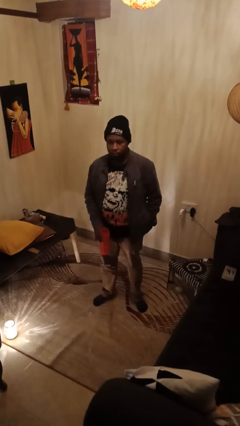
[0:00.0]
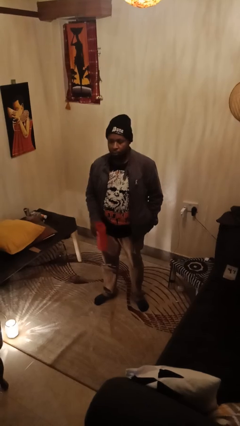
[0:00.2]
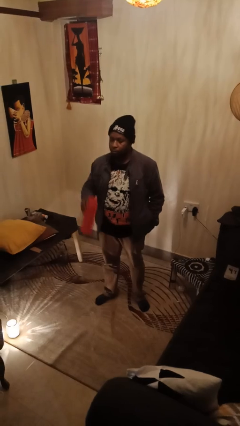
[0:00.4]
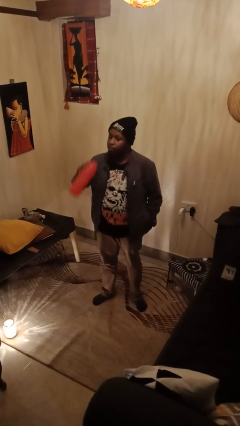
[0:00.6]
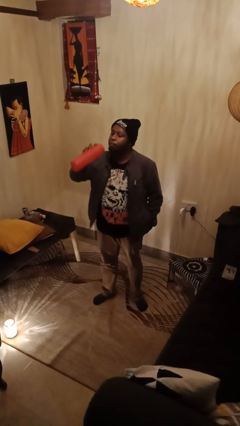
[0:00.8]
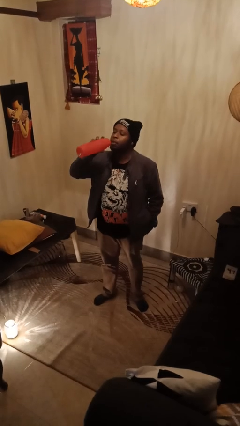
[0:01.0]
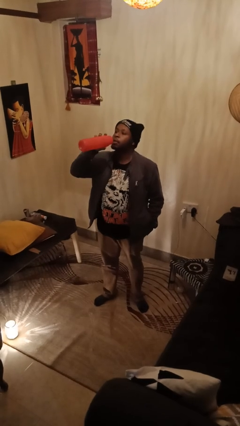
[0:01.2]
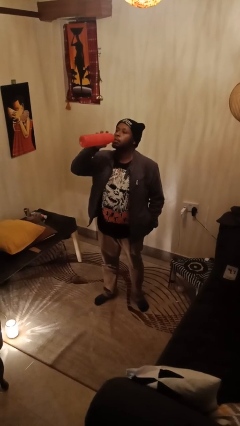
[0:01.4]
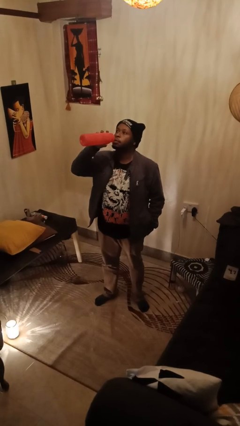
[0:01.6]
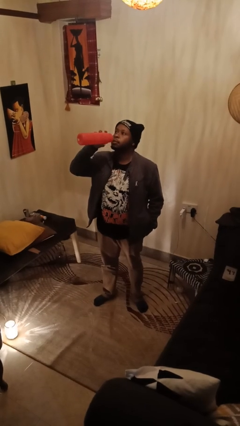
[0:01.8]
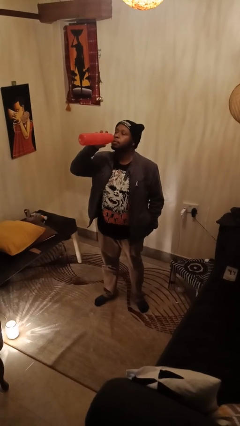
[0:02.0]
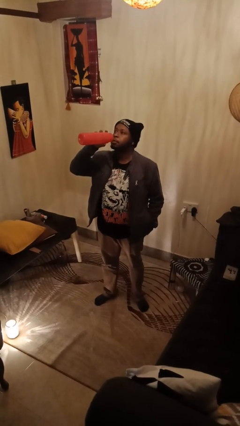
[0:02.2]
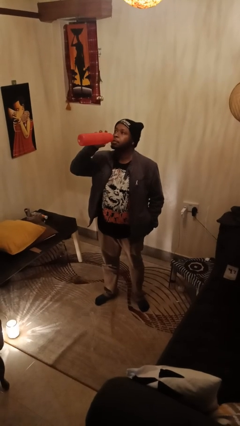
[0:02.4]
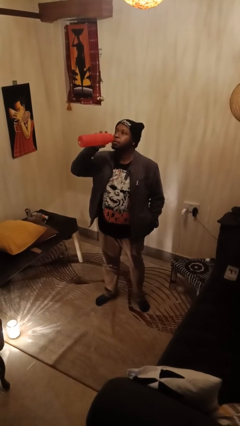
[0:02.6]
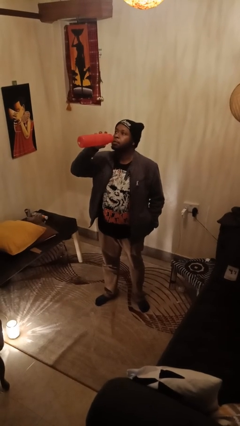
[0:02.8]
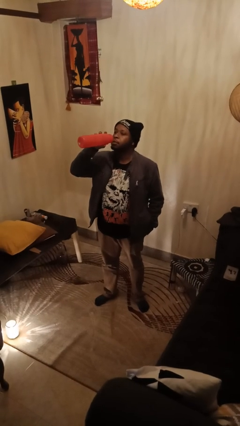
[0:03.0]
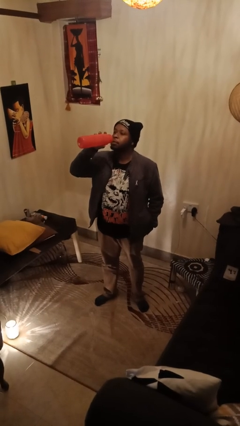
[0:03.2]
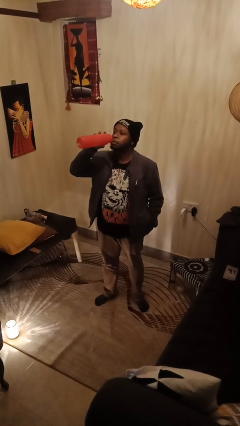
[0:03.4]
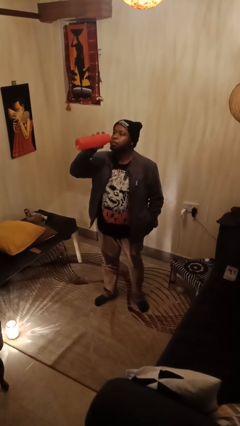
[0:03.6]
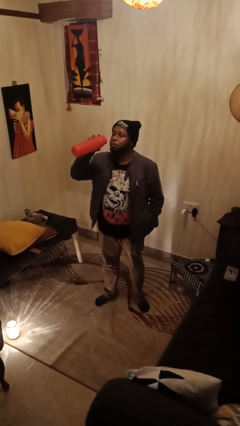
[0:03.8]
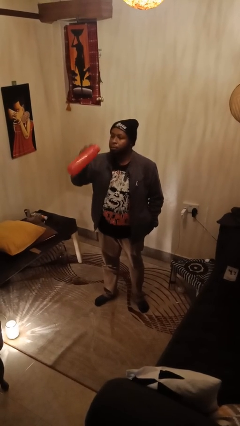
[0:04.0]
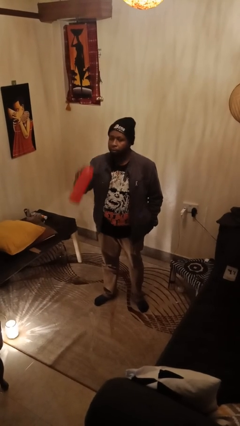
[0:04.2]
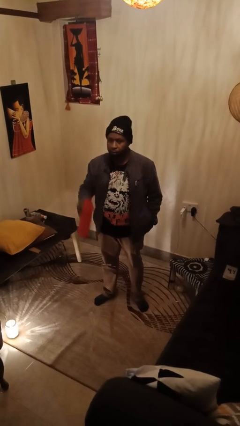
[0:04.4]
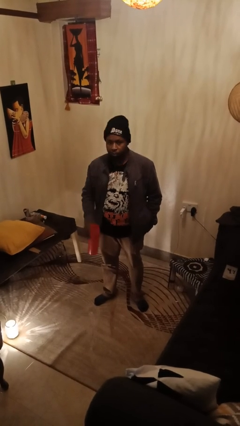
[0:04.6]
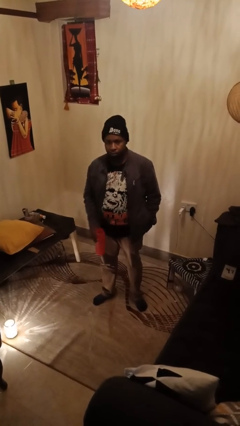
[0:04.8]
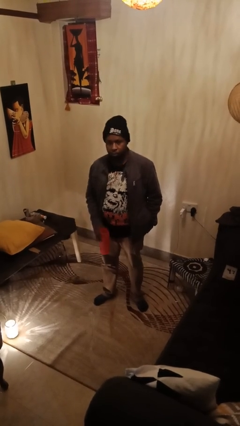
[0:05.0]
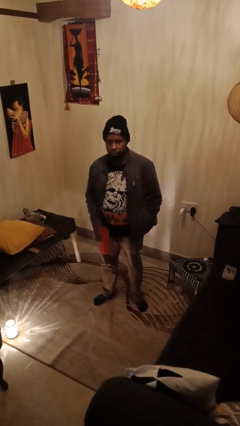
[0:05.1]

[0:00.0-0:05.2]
person drinks from bottle

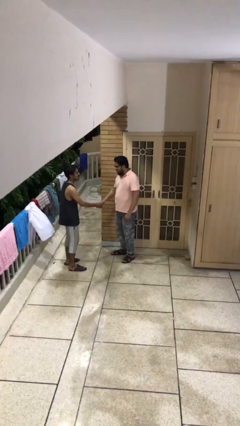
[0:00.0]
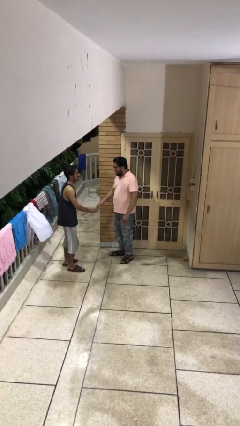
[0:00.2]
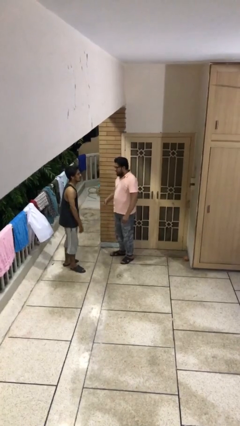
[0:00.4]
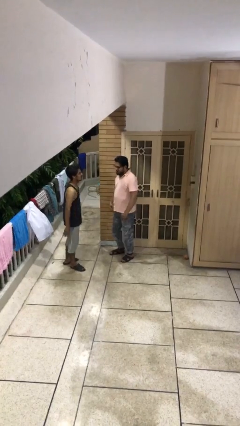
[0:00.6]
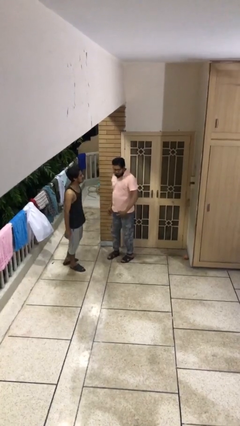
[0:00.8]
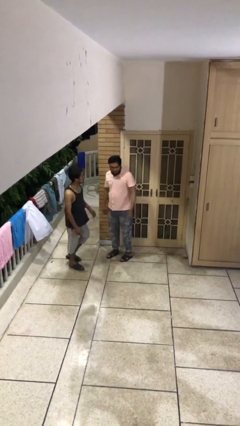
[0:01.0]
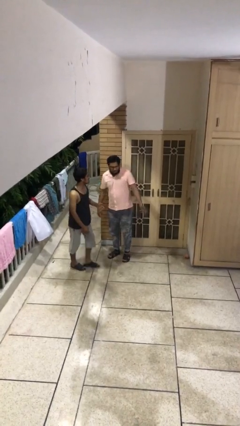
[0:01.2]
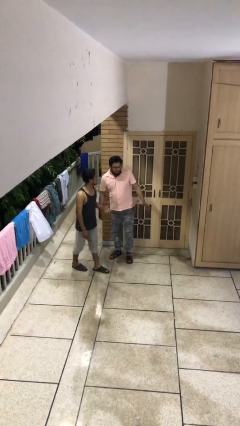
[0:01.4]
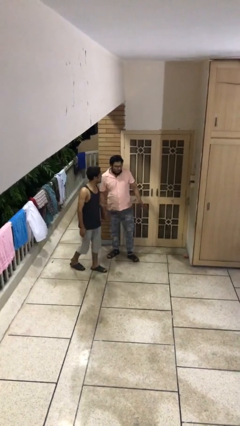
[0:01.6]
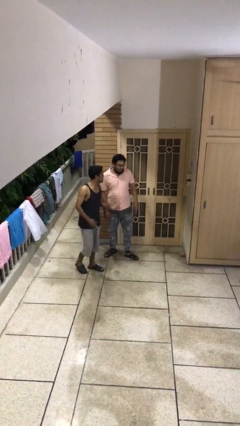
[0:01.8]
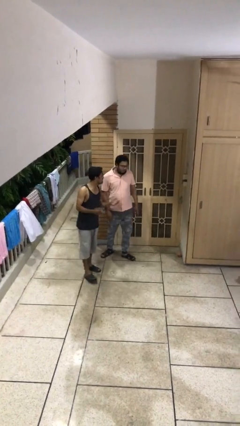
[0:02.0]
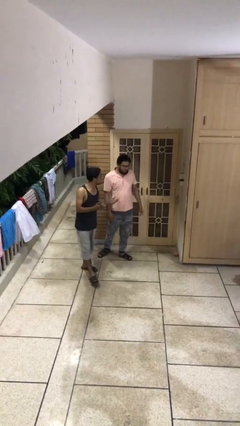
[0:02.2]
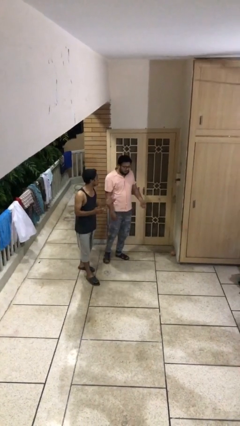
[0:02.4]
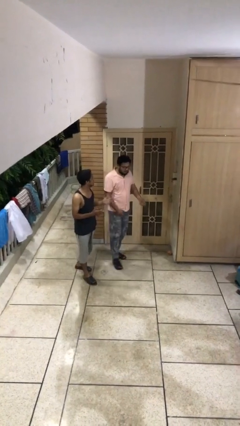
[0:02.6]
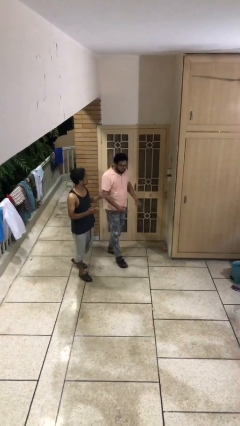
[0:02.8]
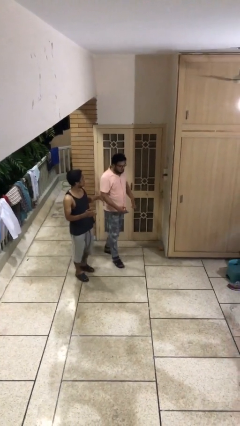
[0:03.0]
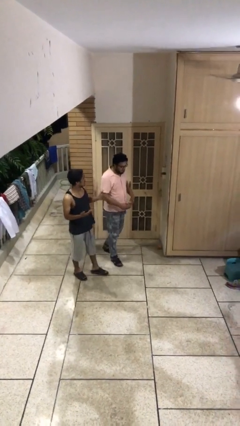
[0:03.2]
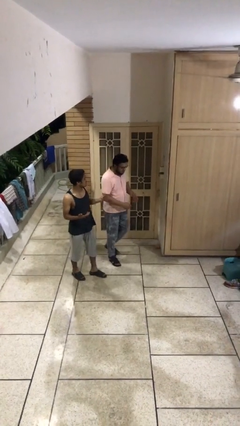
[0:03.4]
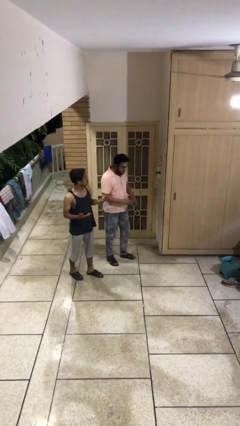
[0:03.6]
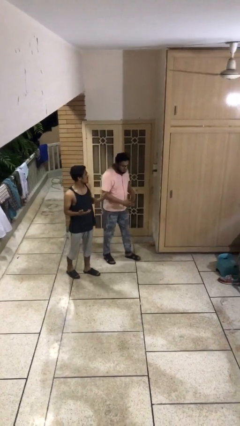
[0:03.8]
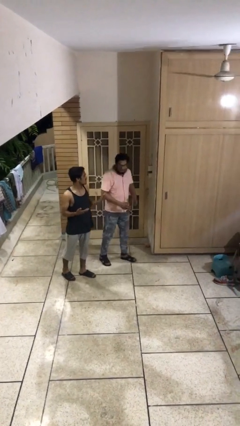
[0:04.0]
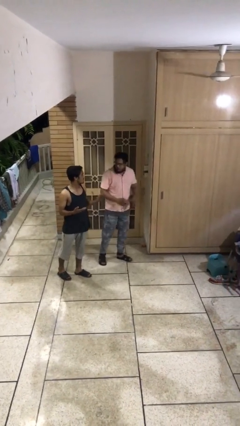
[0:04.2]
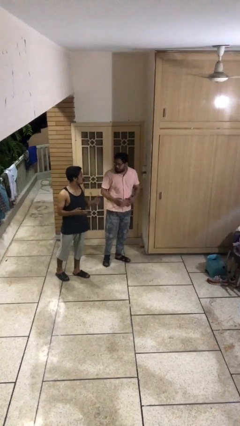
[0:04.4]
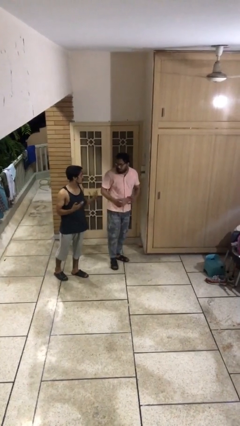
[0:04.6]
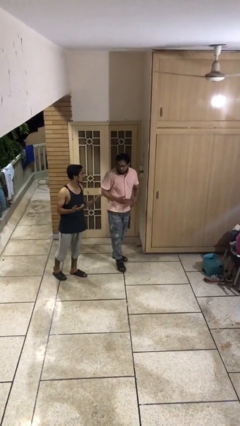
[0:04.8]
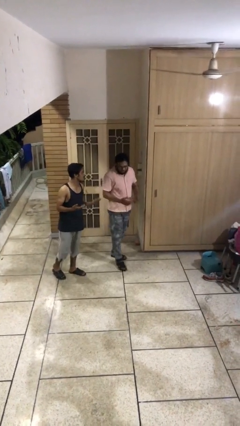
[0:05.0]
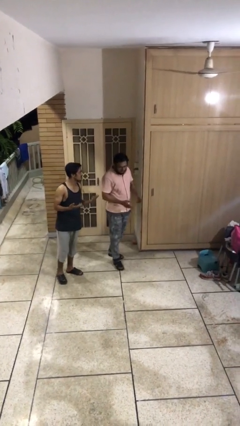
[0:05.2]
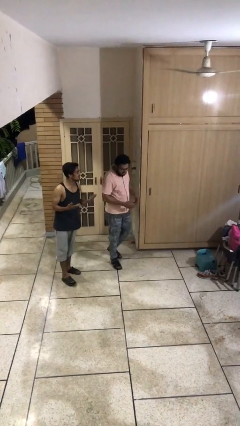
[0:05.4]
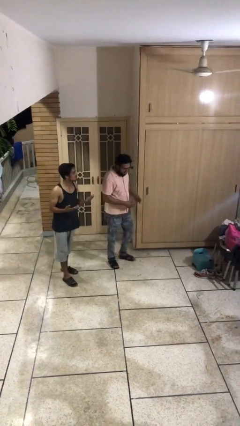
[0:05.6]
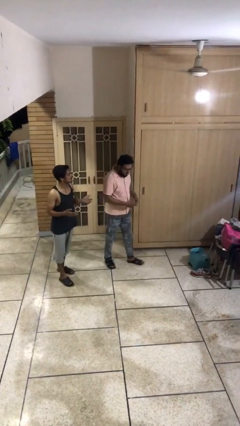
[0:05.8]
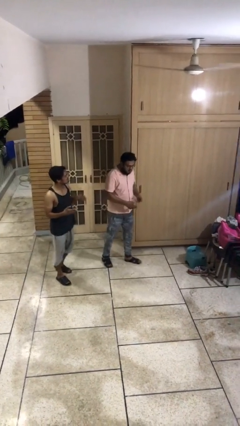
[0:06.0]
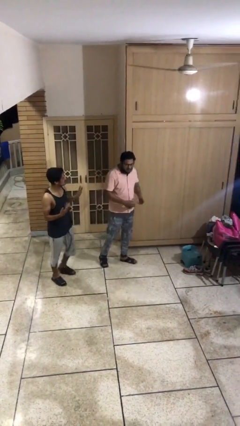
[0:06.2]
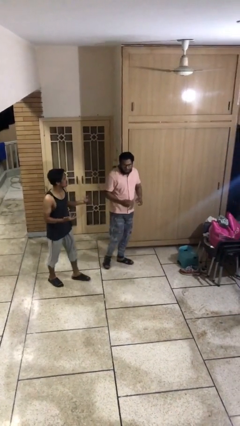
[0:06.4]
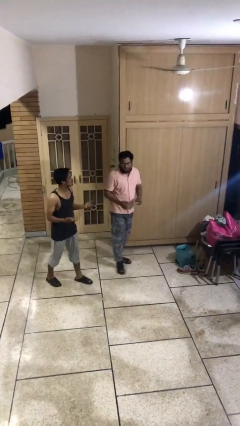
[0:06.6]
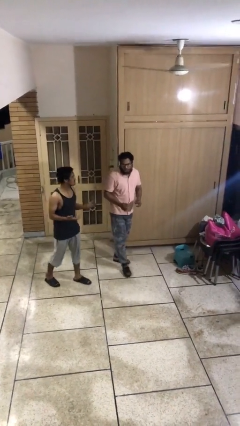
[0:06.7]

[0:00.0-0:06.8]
person talks to person

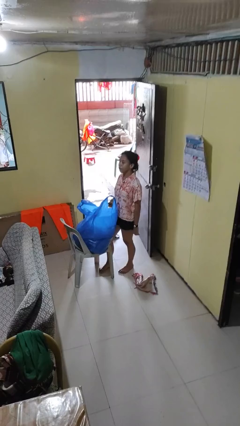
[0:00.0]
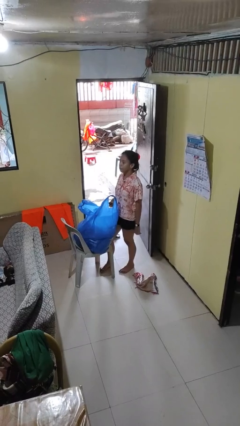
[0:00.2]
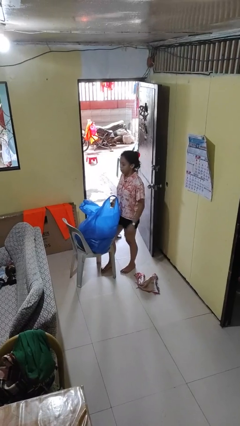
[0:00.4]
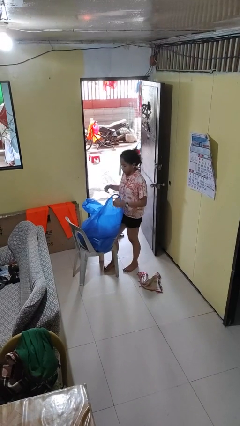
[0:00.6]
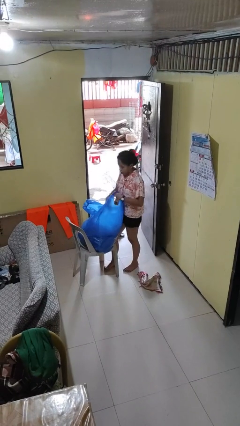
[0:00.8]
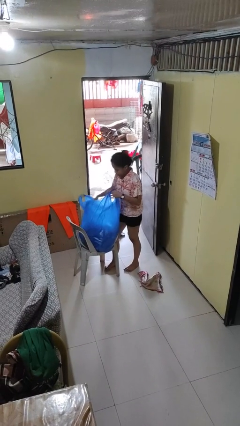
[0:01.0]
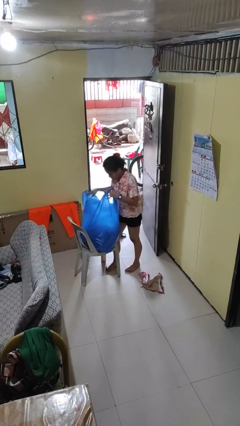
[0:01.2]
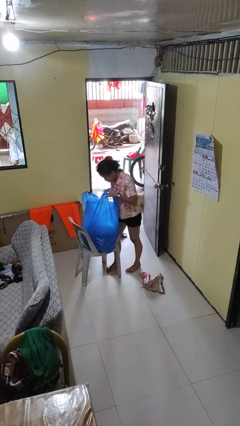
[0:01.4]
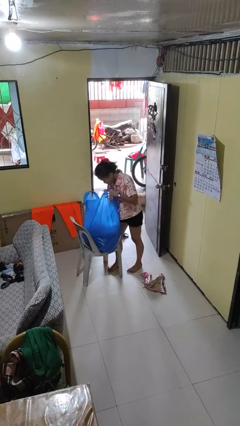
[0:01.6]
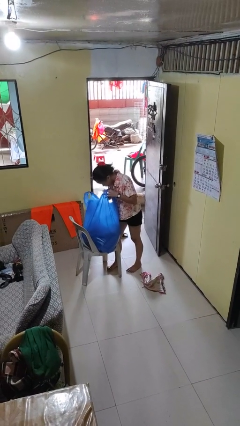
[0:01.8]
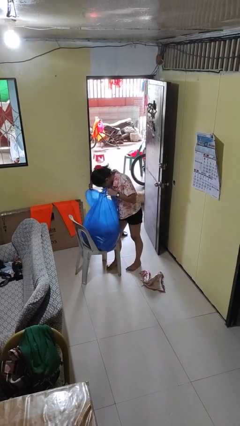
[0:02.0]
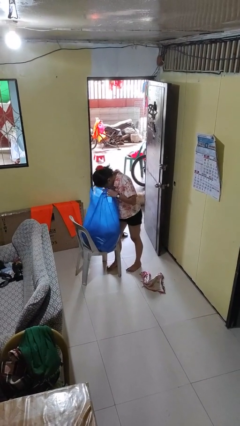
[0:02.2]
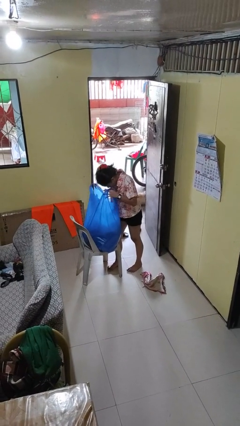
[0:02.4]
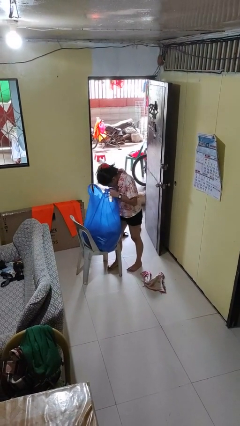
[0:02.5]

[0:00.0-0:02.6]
person searches in bag

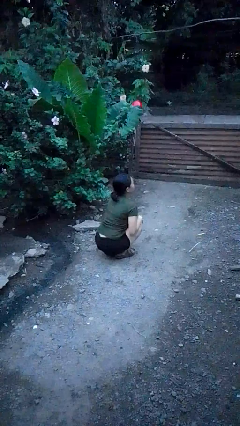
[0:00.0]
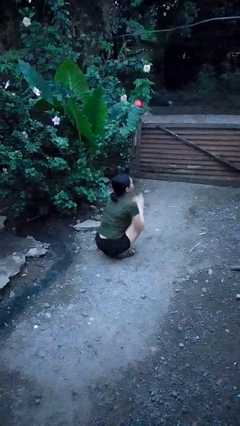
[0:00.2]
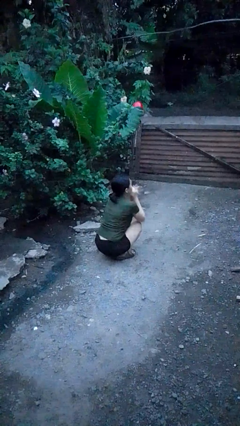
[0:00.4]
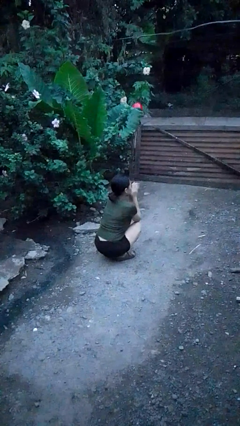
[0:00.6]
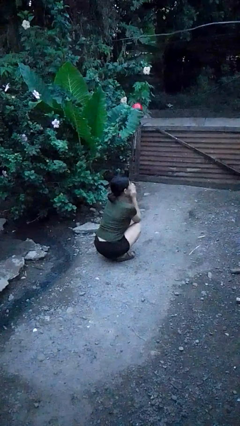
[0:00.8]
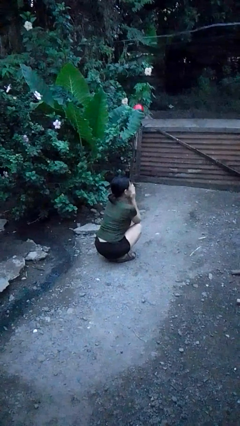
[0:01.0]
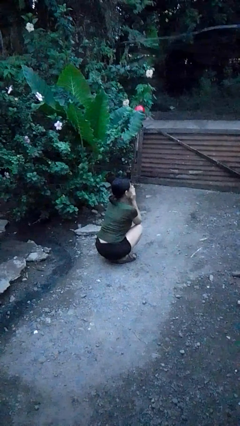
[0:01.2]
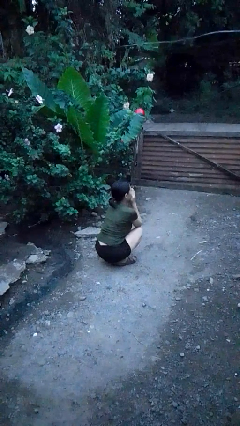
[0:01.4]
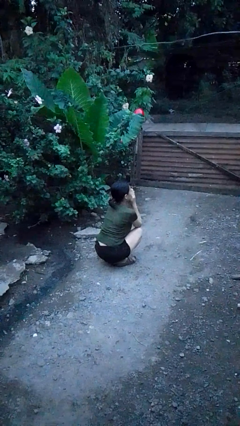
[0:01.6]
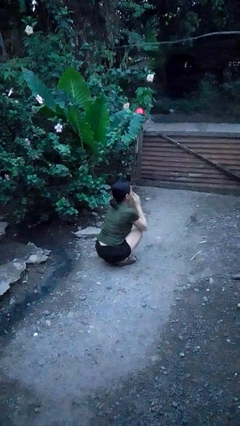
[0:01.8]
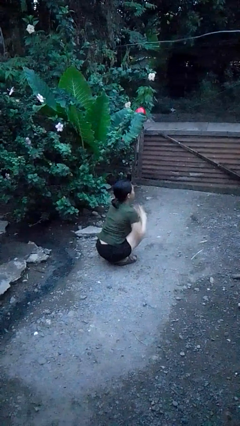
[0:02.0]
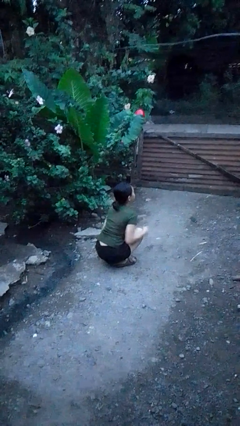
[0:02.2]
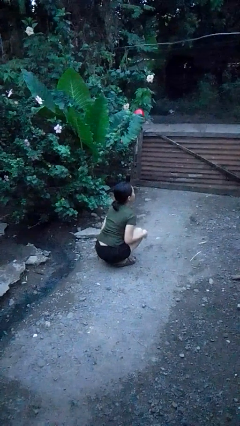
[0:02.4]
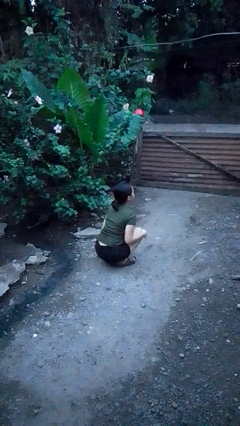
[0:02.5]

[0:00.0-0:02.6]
person blows into hands
